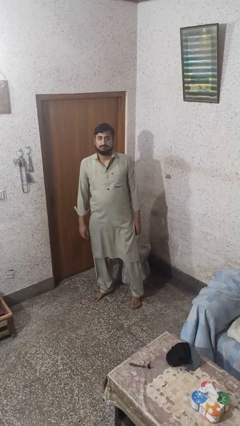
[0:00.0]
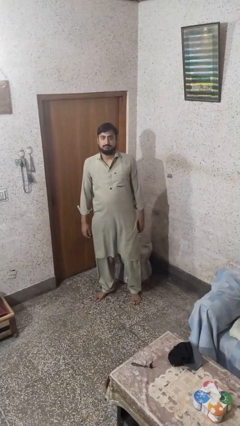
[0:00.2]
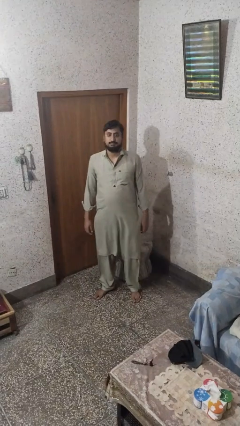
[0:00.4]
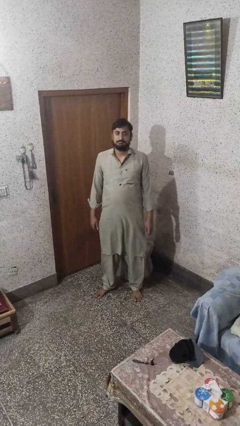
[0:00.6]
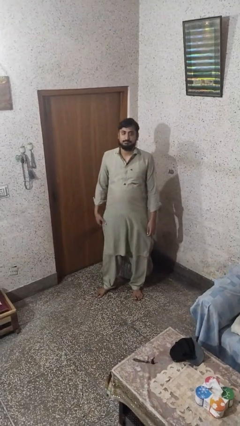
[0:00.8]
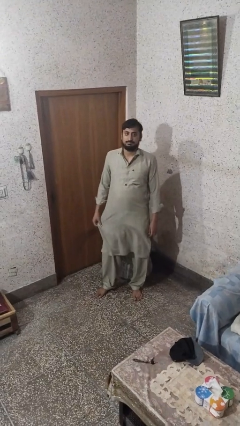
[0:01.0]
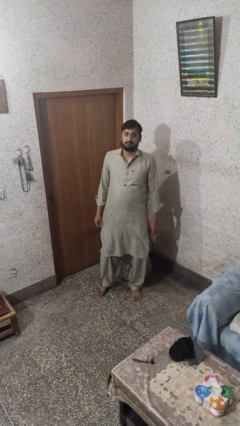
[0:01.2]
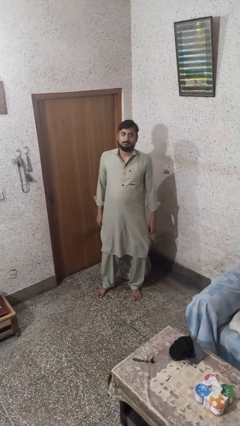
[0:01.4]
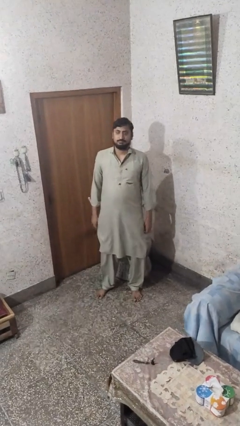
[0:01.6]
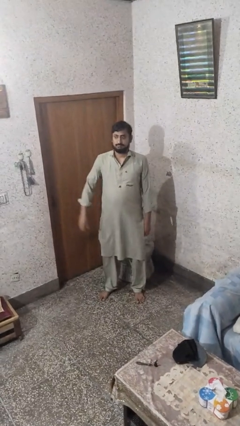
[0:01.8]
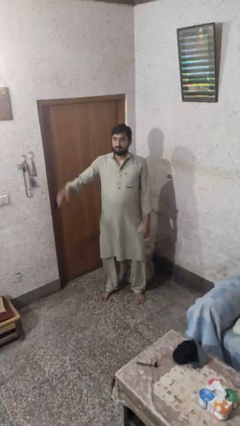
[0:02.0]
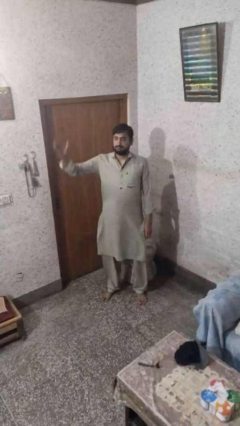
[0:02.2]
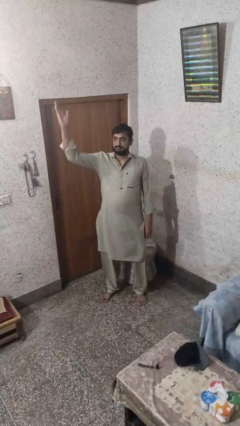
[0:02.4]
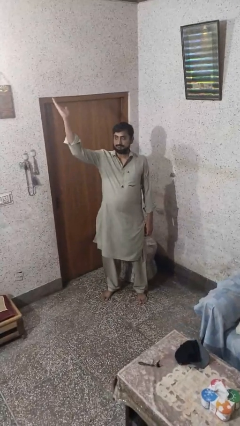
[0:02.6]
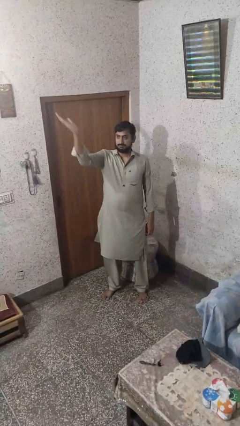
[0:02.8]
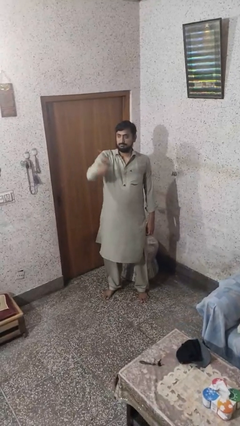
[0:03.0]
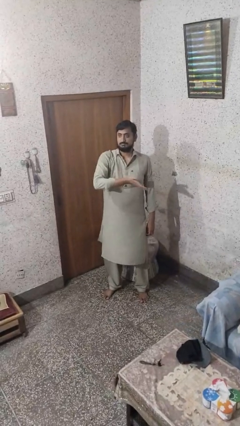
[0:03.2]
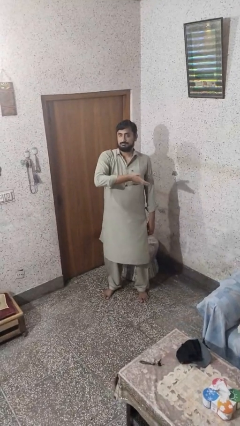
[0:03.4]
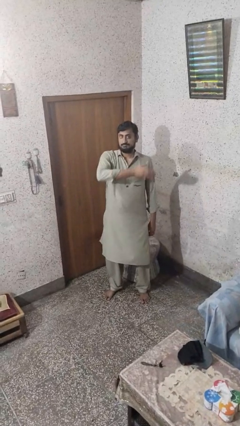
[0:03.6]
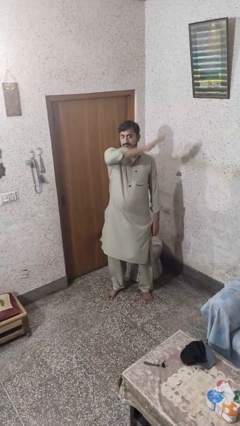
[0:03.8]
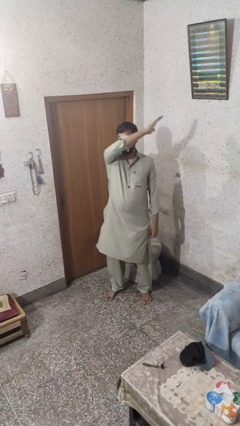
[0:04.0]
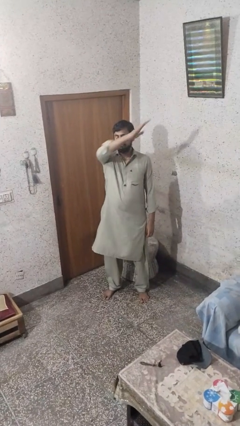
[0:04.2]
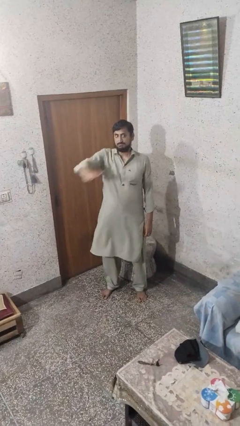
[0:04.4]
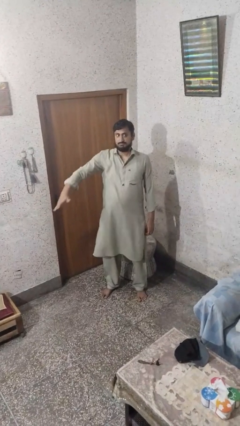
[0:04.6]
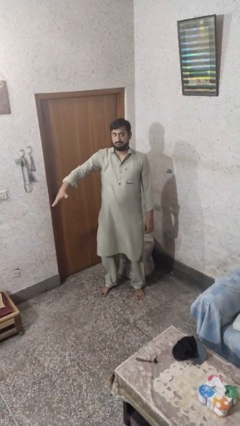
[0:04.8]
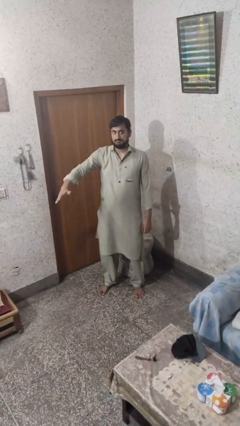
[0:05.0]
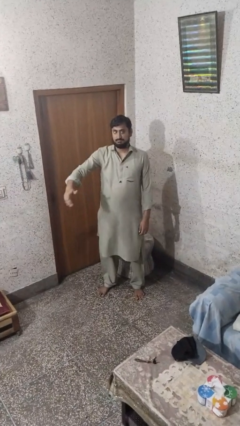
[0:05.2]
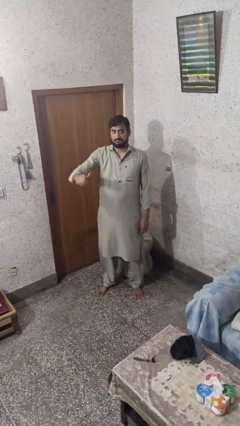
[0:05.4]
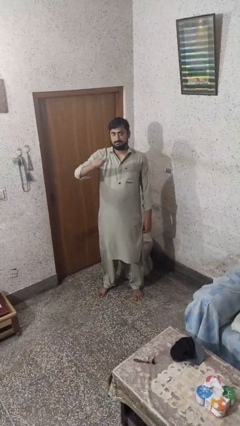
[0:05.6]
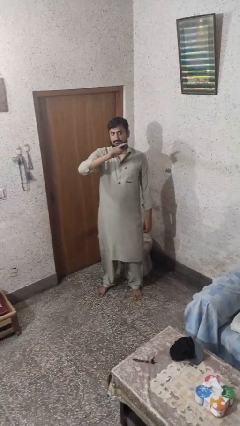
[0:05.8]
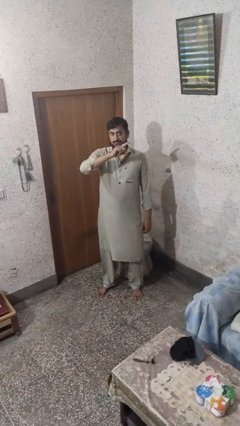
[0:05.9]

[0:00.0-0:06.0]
person gestures cut

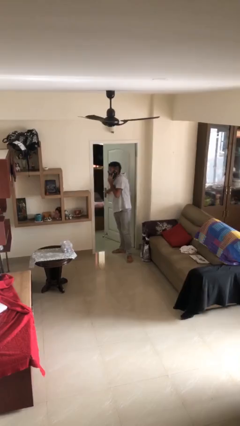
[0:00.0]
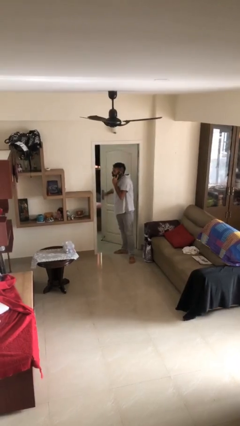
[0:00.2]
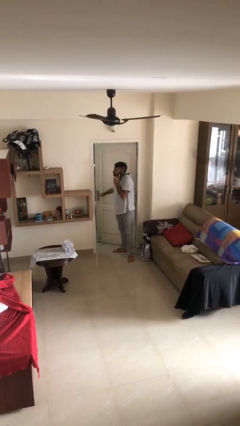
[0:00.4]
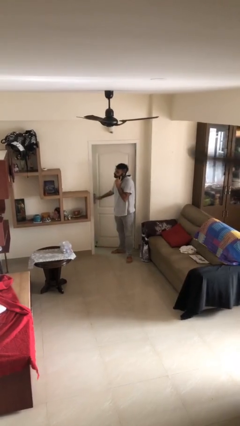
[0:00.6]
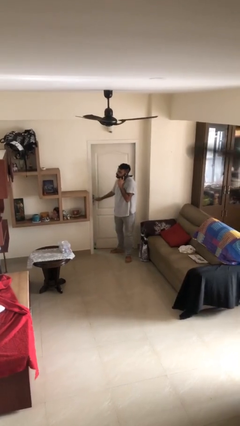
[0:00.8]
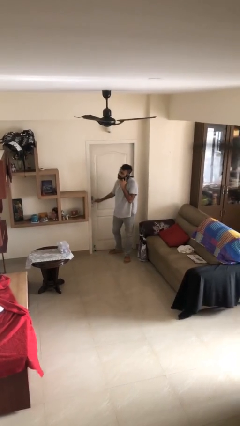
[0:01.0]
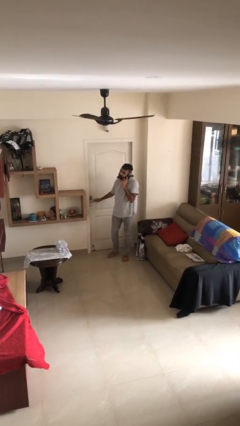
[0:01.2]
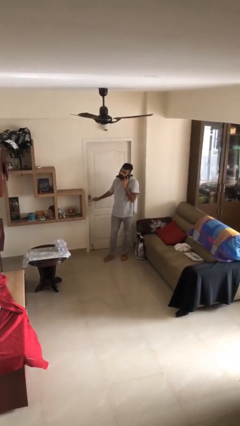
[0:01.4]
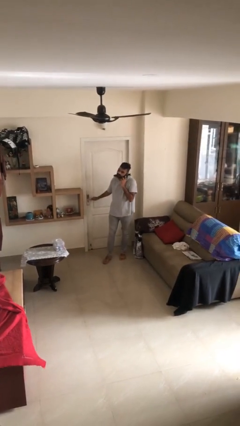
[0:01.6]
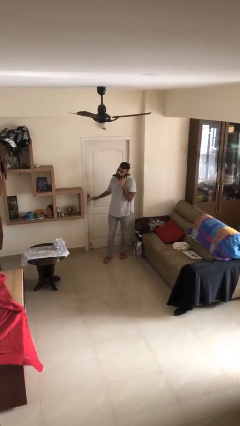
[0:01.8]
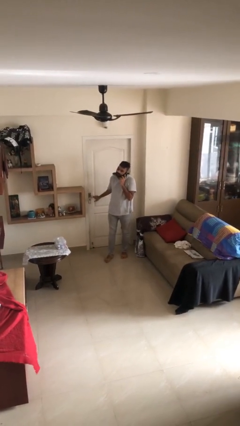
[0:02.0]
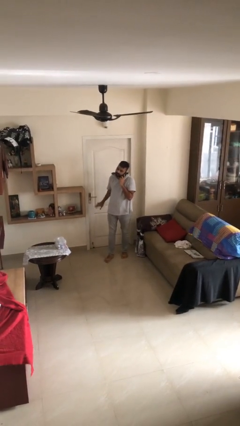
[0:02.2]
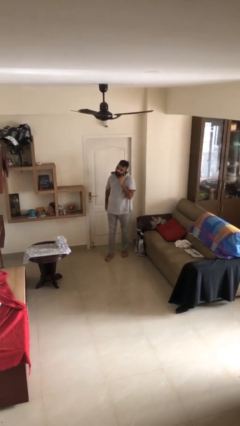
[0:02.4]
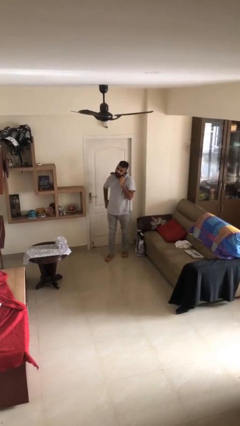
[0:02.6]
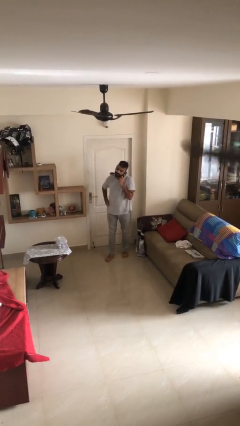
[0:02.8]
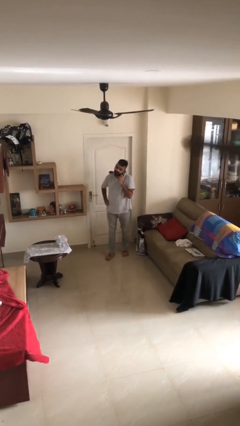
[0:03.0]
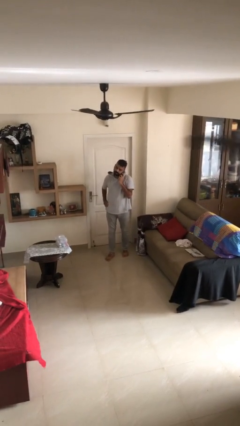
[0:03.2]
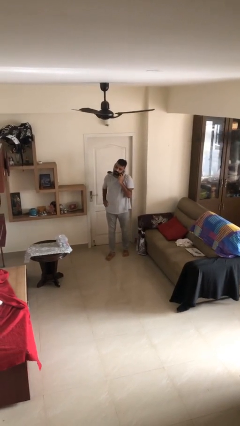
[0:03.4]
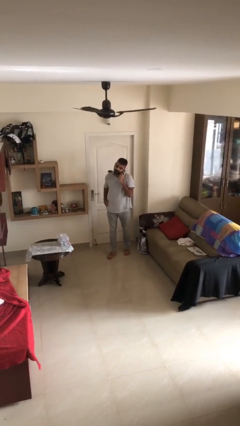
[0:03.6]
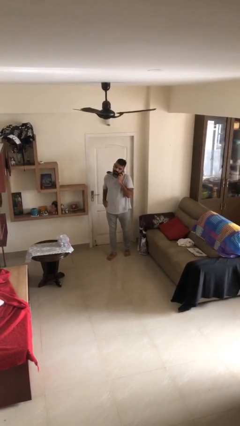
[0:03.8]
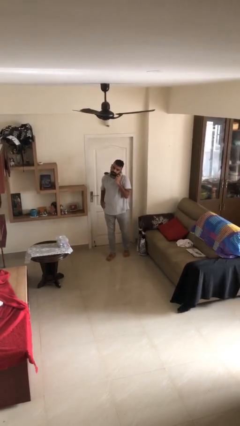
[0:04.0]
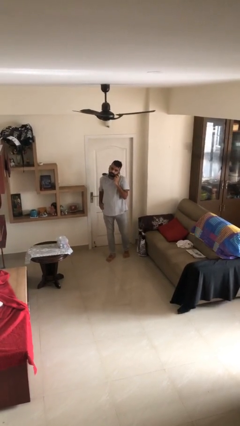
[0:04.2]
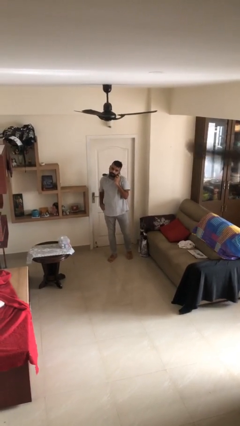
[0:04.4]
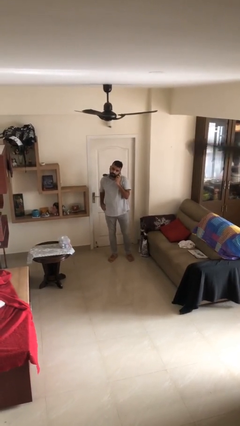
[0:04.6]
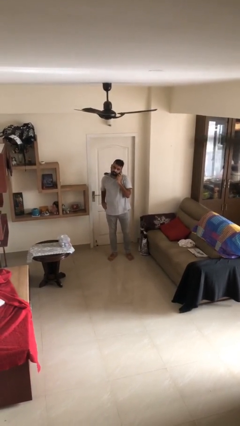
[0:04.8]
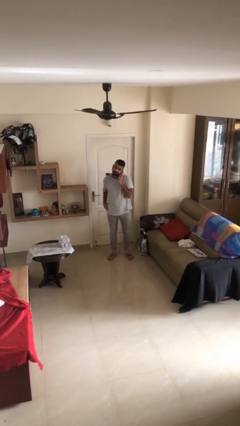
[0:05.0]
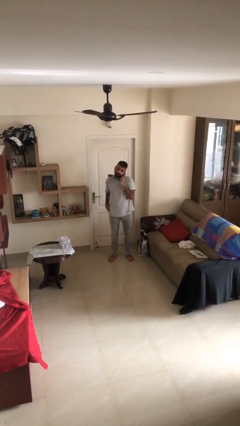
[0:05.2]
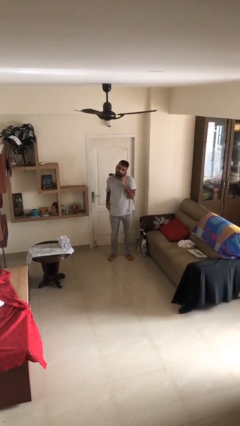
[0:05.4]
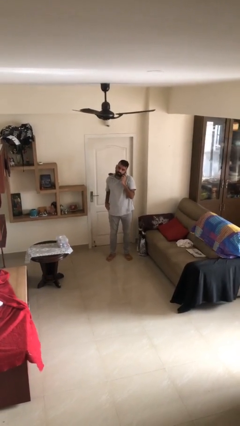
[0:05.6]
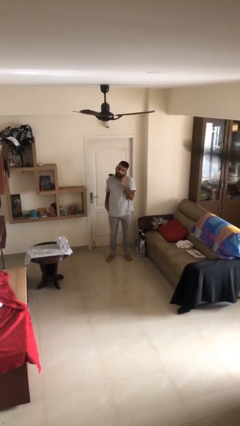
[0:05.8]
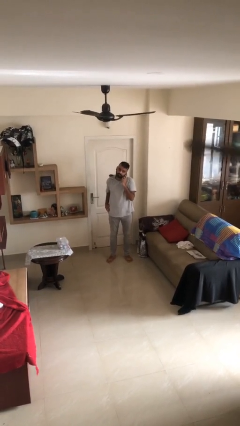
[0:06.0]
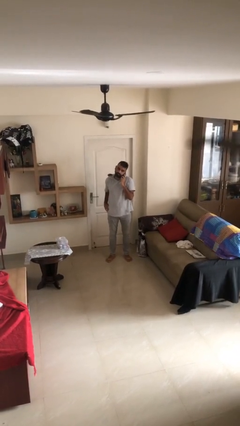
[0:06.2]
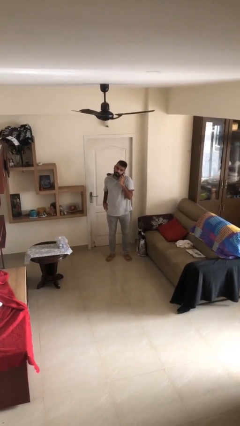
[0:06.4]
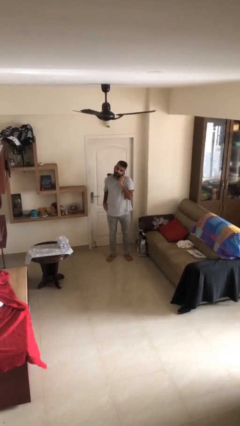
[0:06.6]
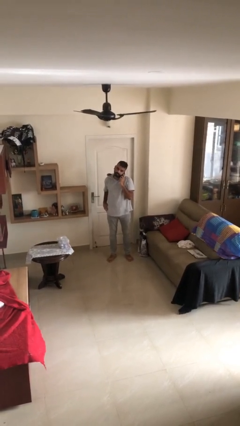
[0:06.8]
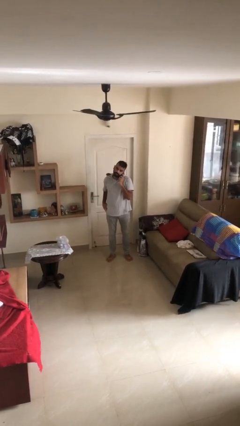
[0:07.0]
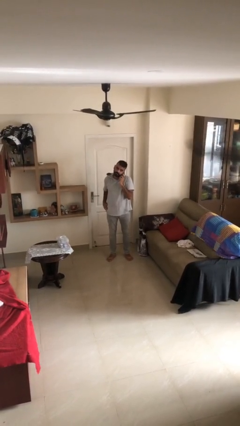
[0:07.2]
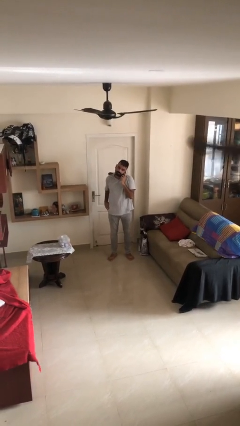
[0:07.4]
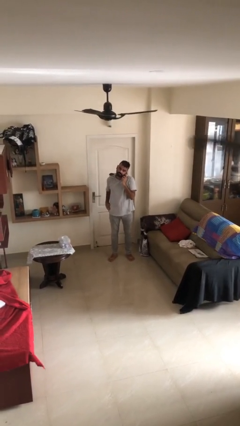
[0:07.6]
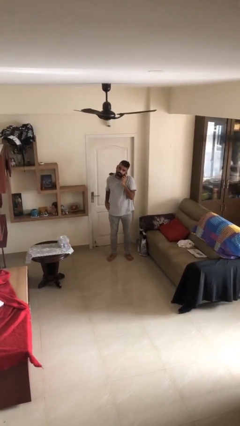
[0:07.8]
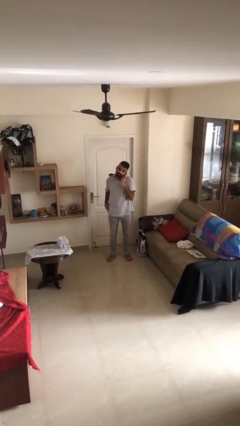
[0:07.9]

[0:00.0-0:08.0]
person closes facility door

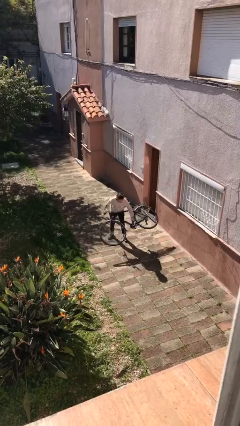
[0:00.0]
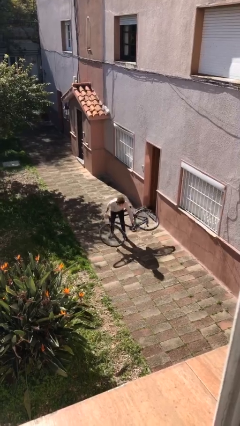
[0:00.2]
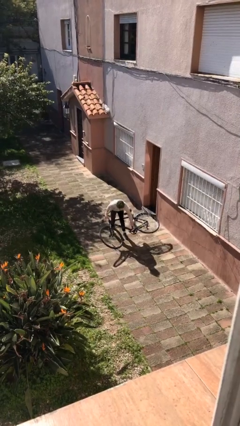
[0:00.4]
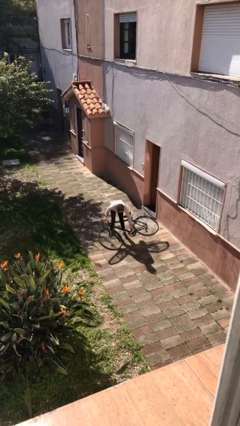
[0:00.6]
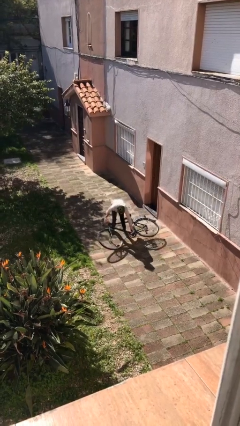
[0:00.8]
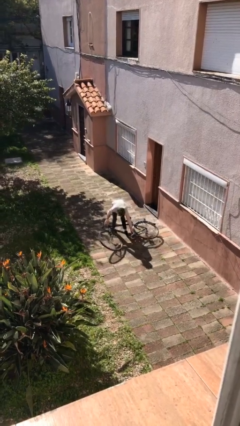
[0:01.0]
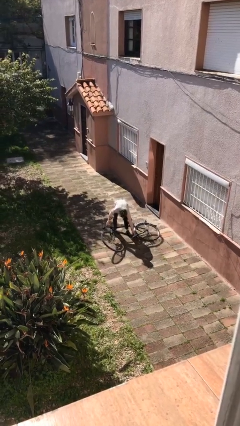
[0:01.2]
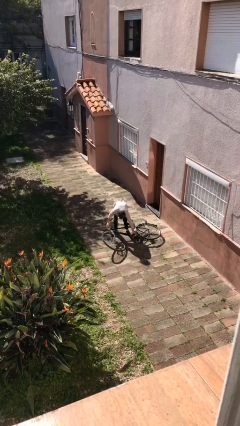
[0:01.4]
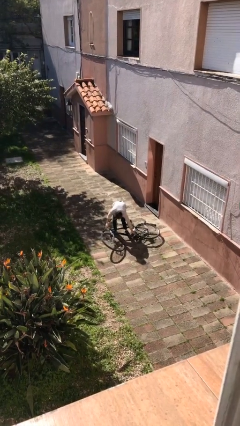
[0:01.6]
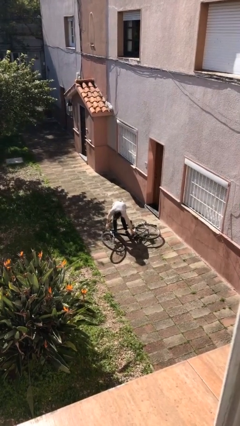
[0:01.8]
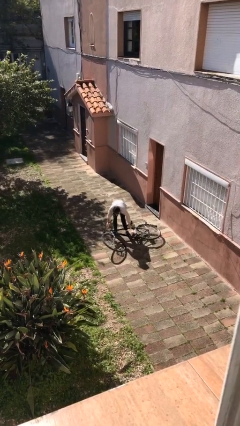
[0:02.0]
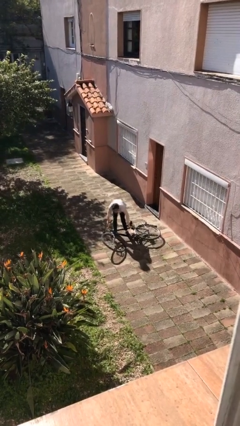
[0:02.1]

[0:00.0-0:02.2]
person puts down object on floor

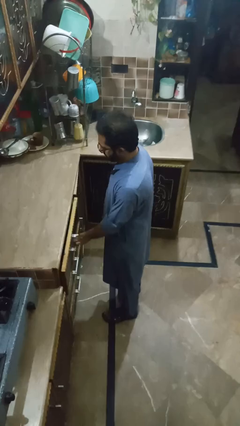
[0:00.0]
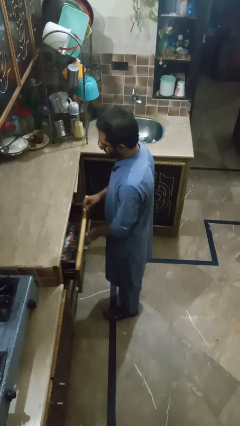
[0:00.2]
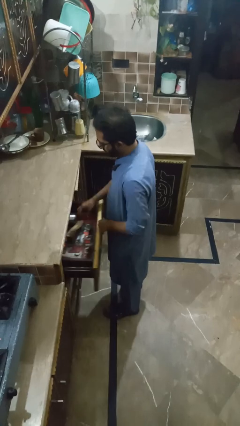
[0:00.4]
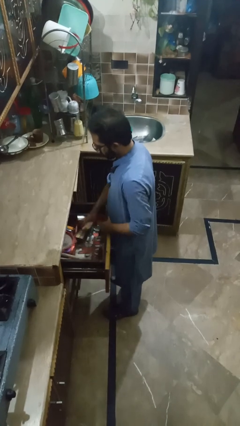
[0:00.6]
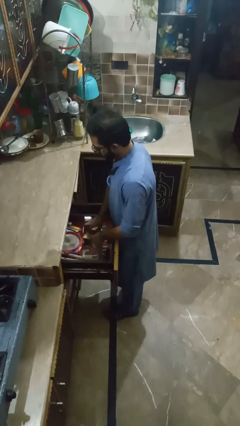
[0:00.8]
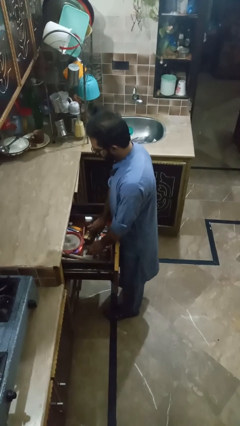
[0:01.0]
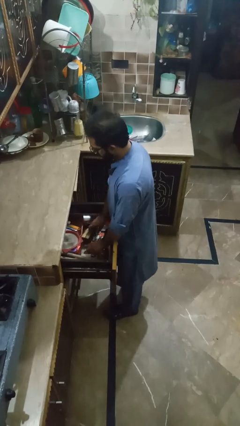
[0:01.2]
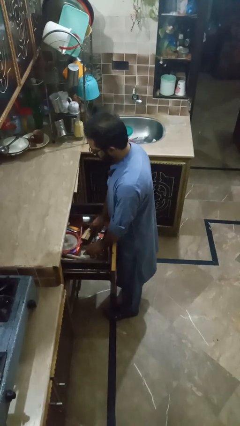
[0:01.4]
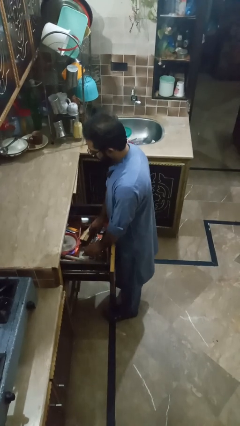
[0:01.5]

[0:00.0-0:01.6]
person searches in kitchen drawer
